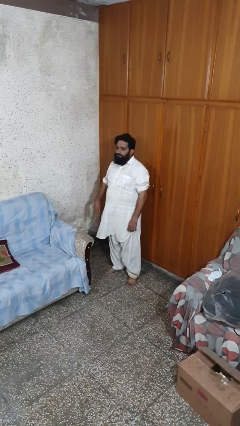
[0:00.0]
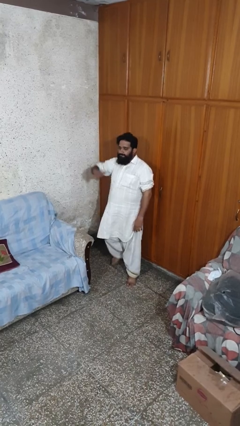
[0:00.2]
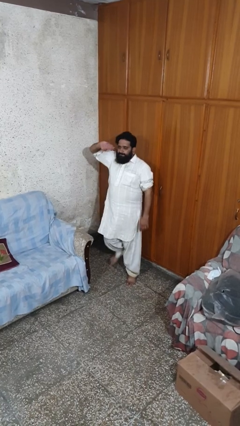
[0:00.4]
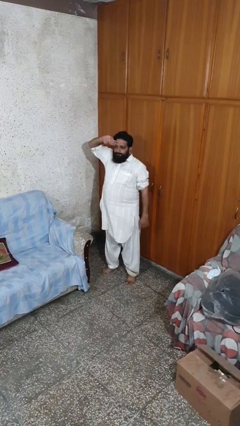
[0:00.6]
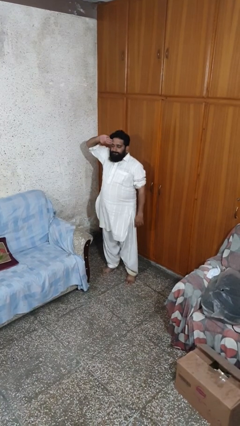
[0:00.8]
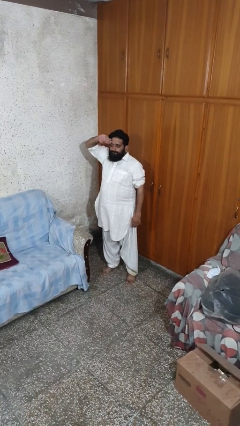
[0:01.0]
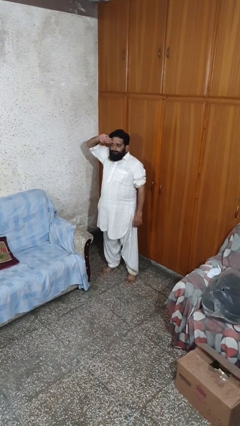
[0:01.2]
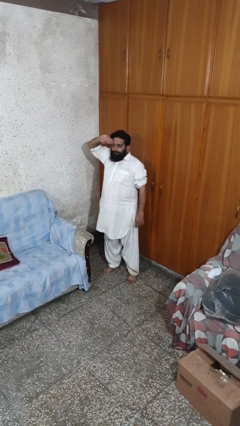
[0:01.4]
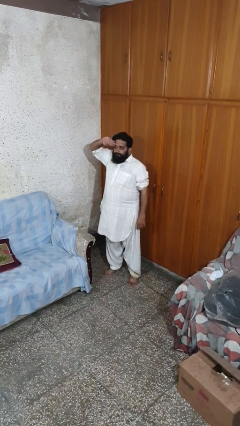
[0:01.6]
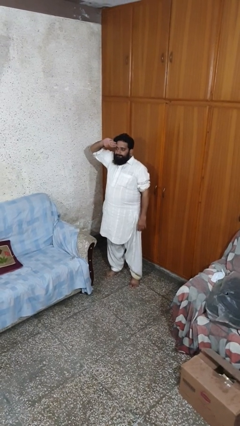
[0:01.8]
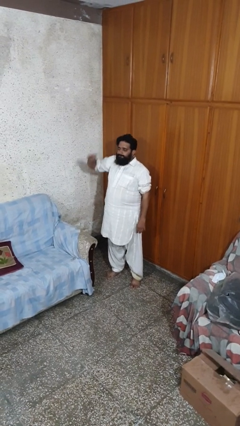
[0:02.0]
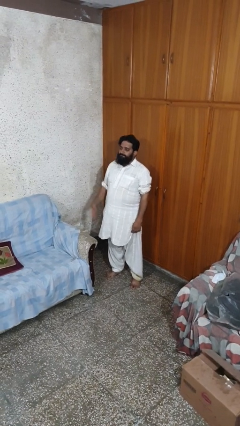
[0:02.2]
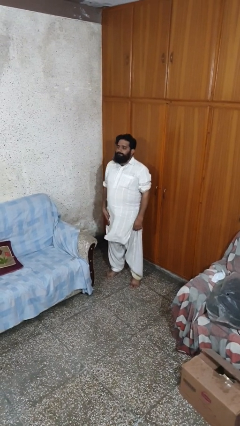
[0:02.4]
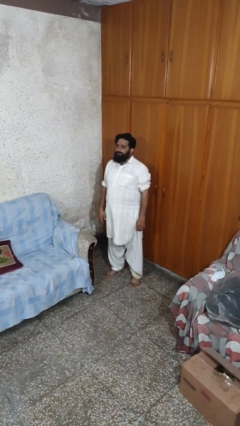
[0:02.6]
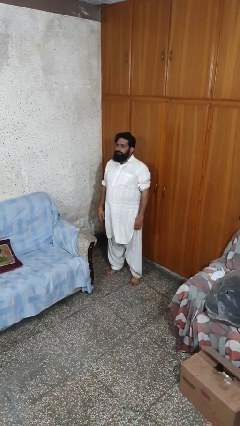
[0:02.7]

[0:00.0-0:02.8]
person salutes

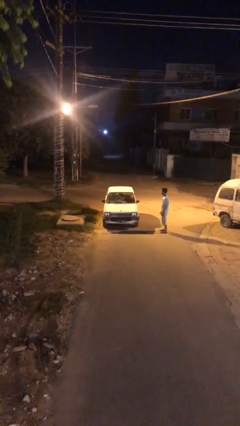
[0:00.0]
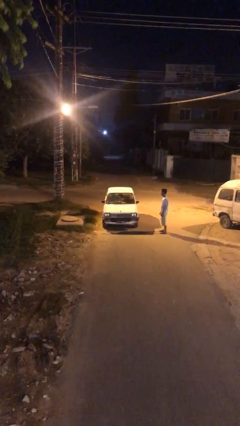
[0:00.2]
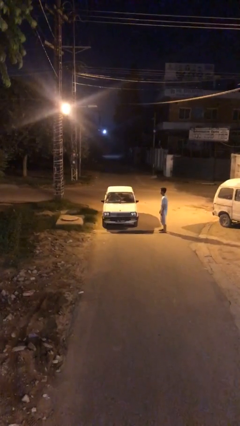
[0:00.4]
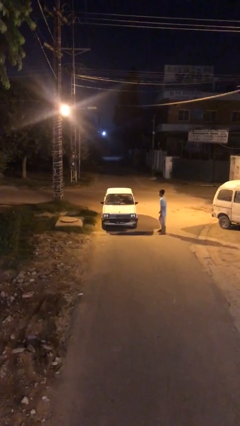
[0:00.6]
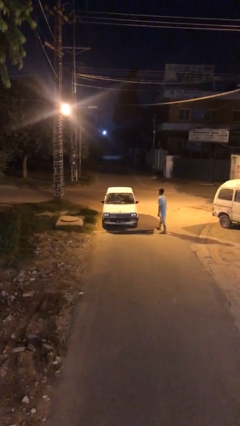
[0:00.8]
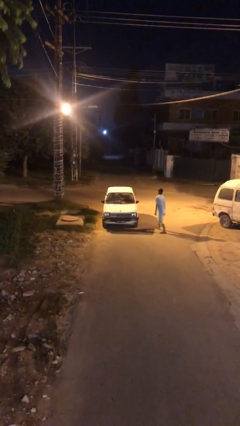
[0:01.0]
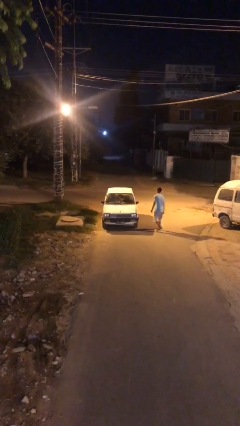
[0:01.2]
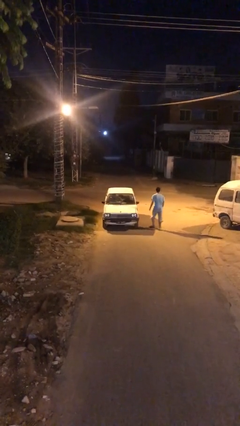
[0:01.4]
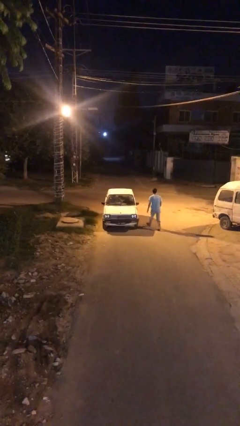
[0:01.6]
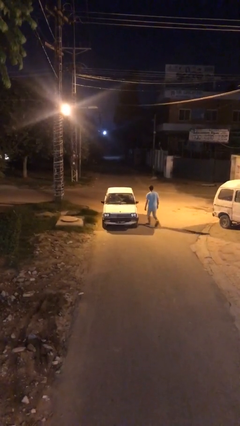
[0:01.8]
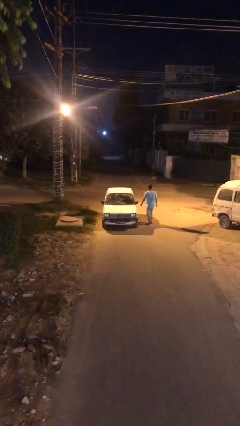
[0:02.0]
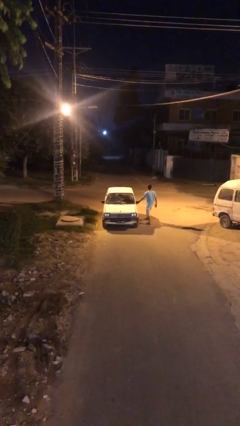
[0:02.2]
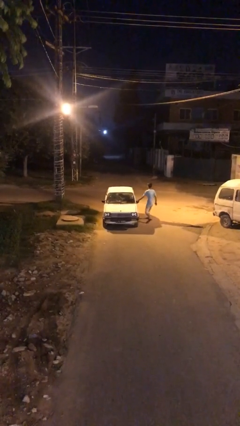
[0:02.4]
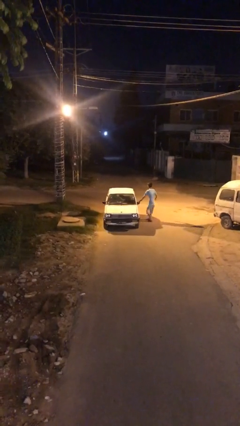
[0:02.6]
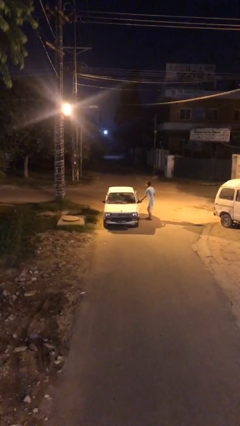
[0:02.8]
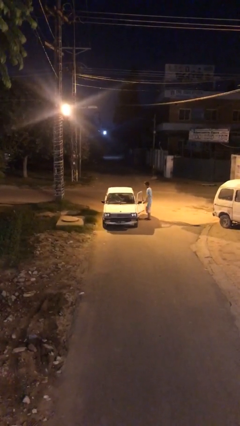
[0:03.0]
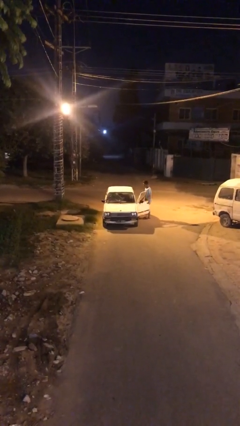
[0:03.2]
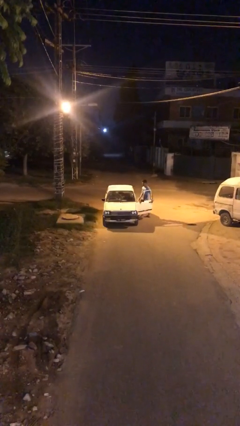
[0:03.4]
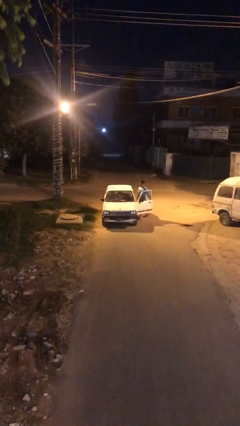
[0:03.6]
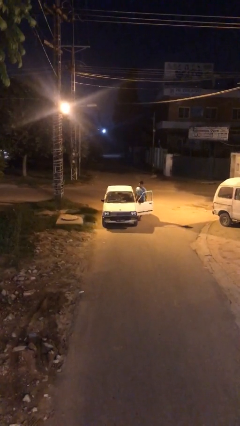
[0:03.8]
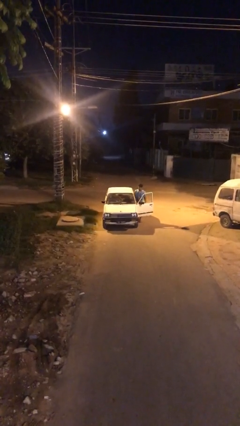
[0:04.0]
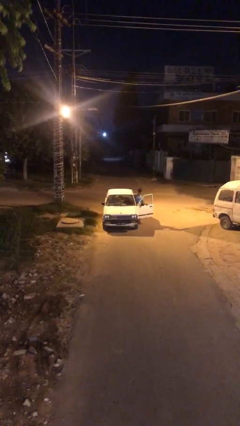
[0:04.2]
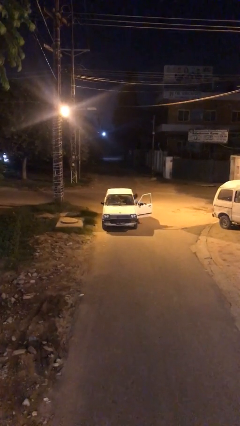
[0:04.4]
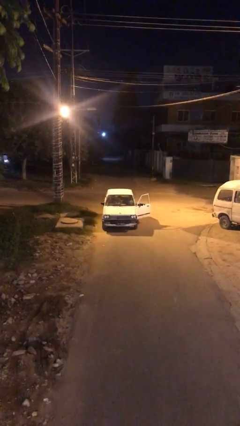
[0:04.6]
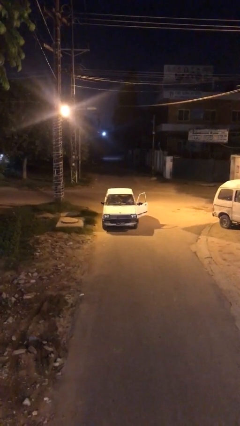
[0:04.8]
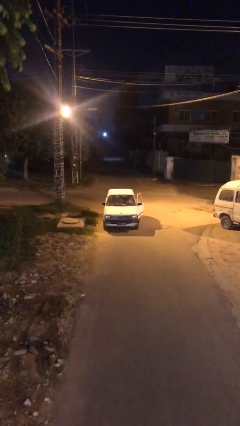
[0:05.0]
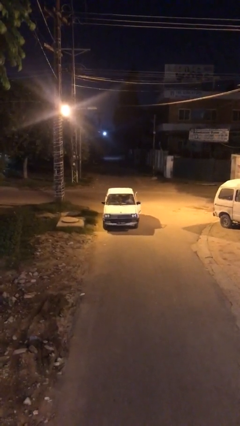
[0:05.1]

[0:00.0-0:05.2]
car picks up person

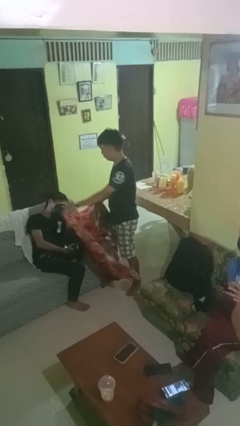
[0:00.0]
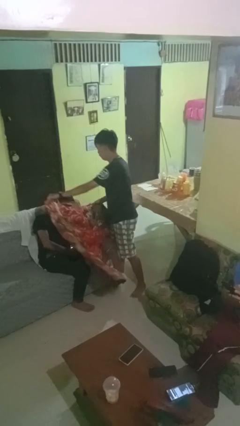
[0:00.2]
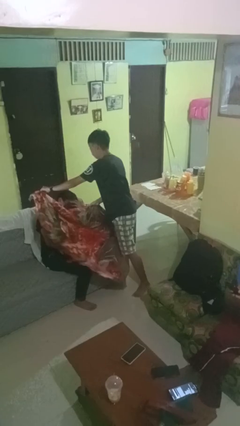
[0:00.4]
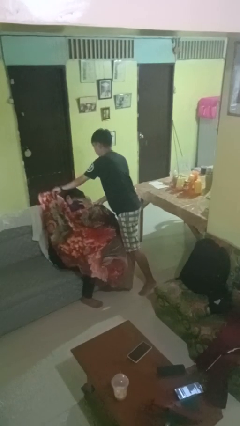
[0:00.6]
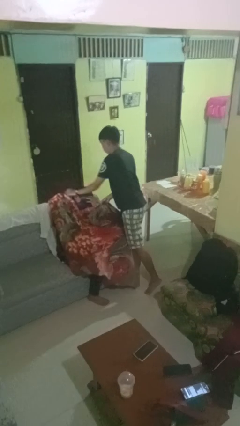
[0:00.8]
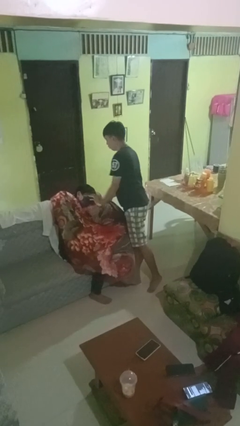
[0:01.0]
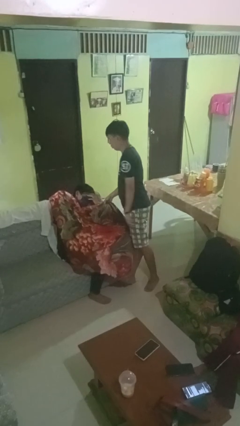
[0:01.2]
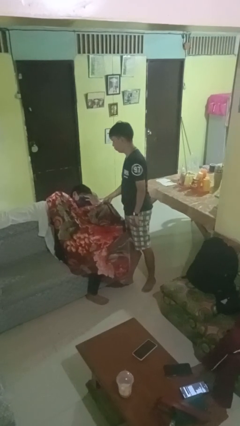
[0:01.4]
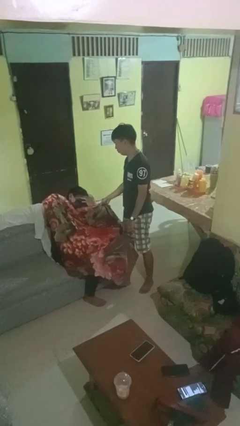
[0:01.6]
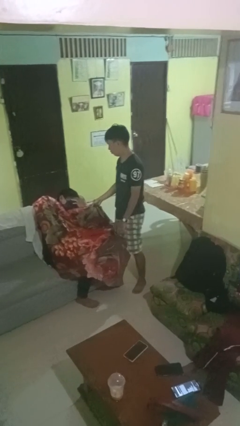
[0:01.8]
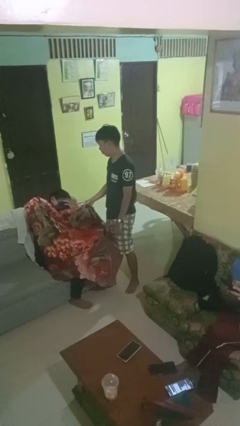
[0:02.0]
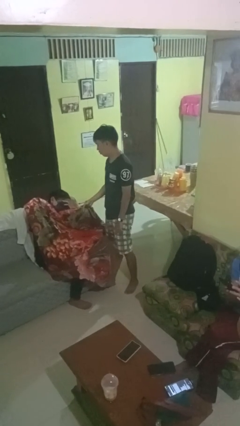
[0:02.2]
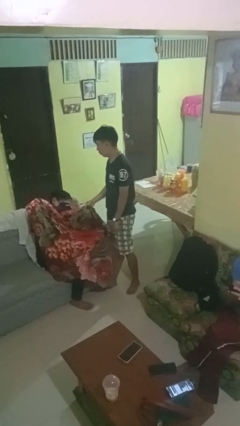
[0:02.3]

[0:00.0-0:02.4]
person covers friend with blanket

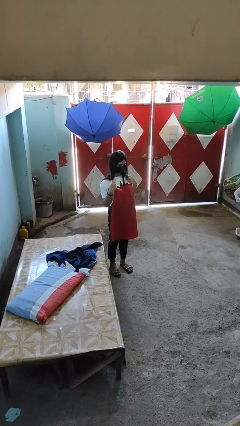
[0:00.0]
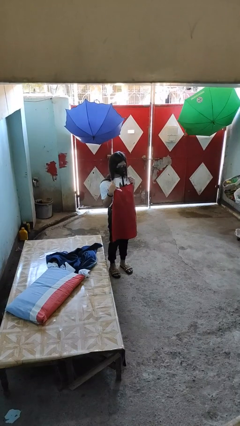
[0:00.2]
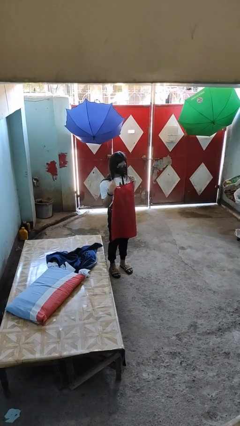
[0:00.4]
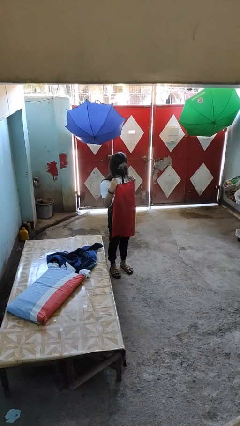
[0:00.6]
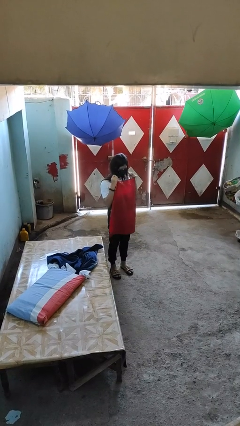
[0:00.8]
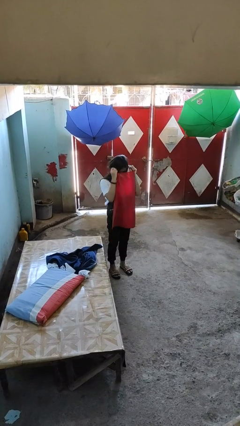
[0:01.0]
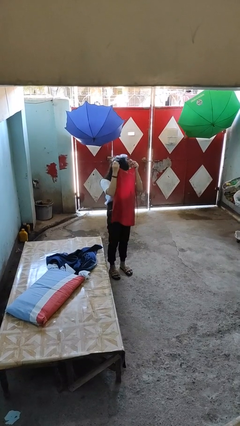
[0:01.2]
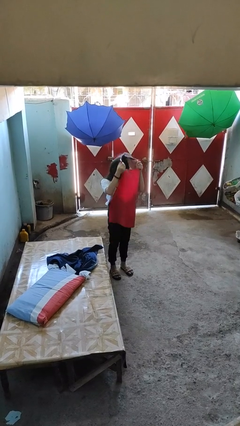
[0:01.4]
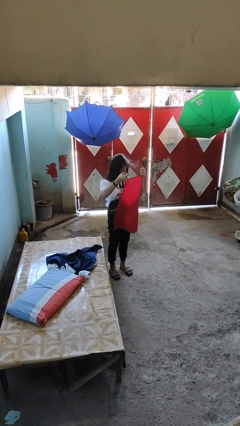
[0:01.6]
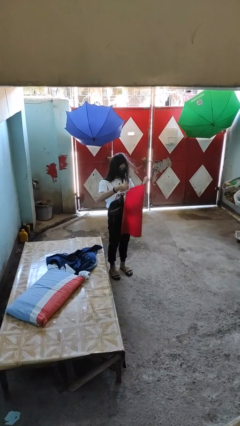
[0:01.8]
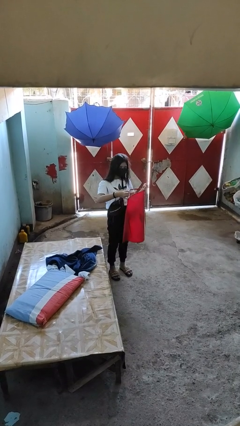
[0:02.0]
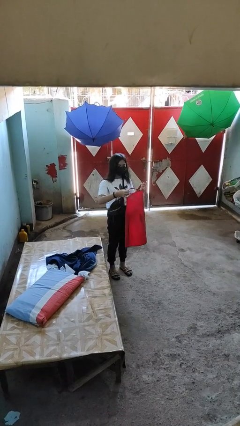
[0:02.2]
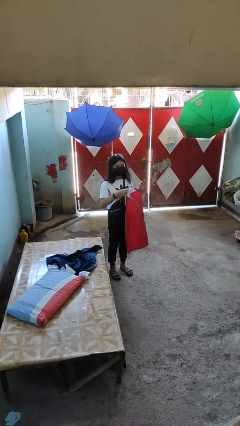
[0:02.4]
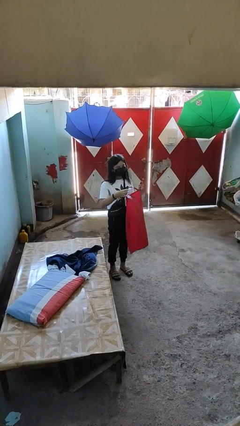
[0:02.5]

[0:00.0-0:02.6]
person takes off apron

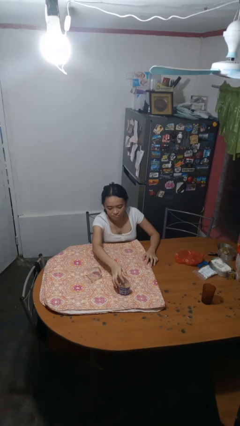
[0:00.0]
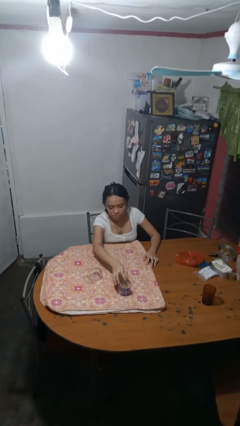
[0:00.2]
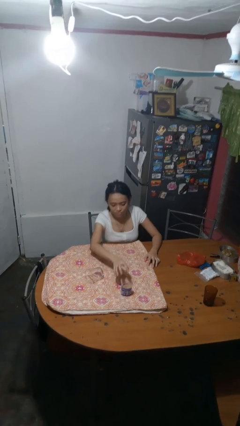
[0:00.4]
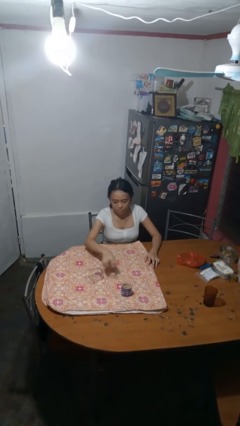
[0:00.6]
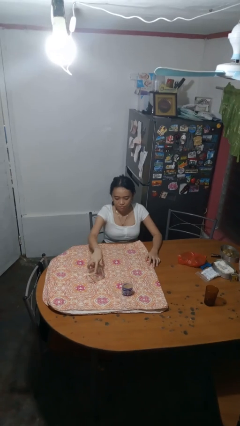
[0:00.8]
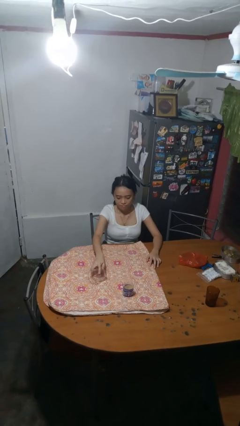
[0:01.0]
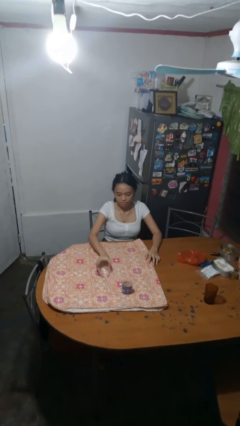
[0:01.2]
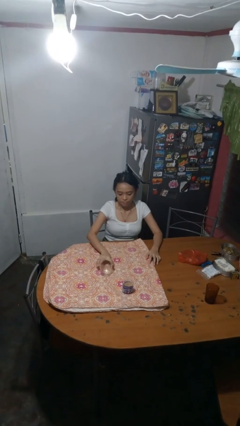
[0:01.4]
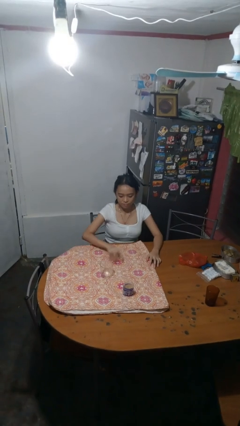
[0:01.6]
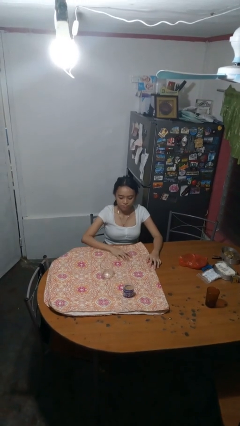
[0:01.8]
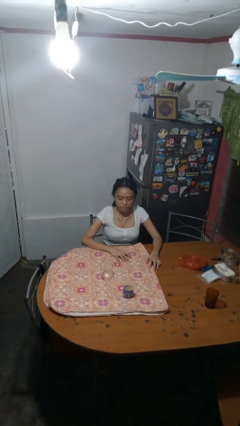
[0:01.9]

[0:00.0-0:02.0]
person sets upright glass

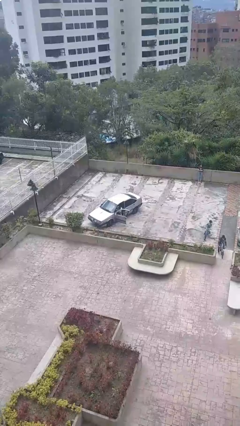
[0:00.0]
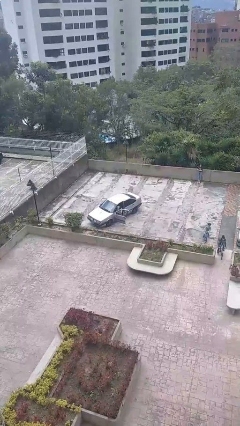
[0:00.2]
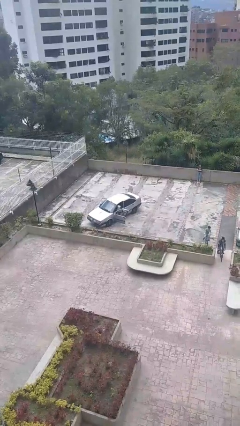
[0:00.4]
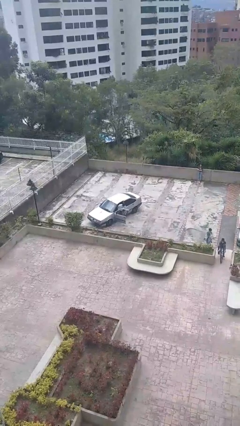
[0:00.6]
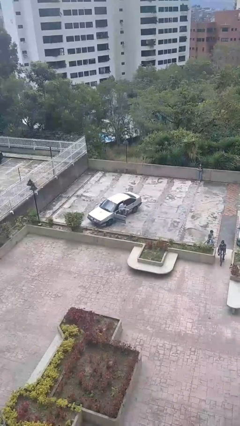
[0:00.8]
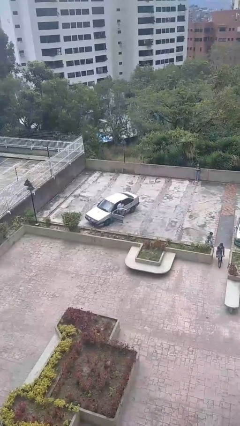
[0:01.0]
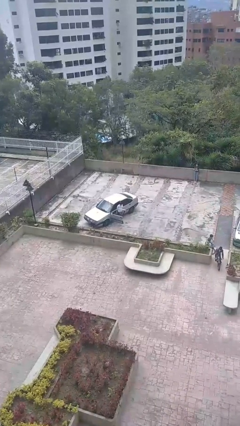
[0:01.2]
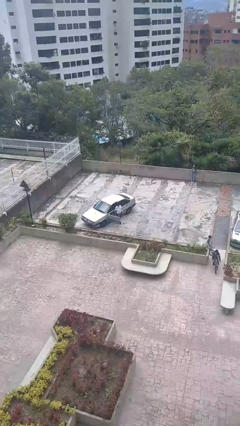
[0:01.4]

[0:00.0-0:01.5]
person exits car

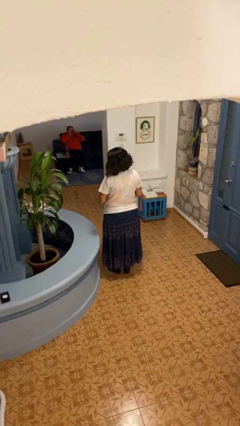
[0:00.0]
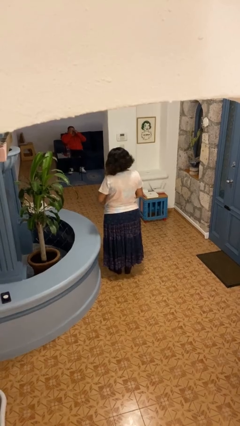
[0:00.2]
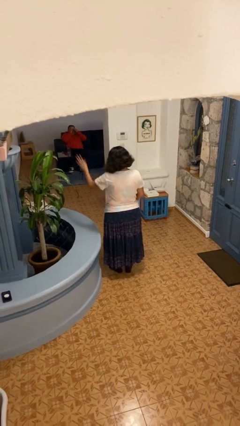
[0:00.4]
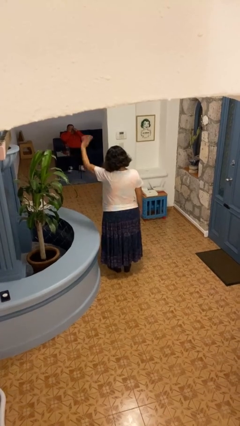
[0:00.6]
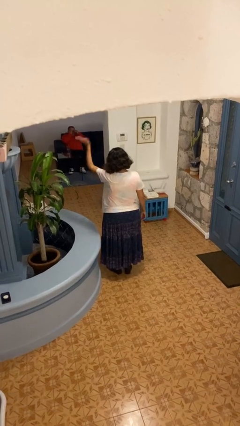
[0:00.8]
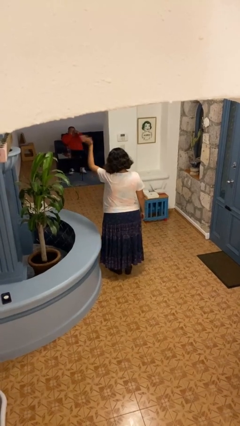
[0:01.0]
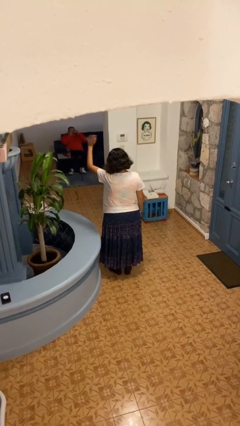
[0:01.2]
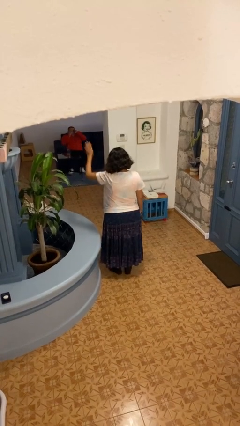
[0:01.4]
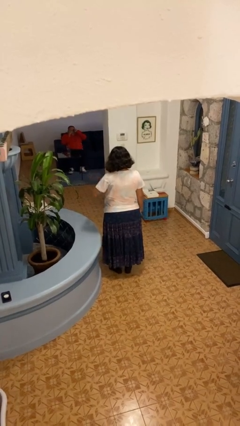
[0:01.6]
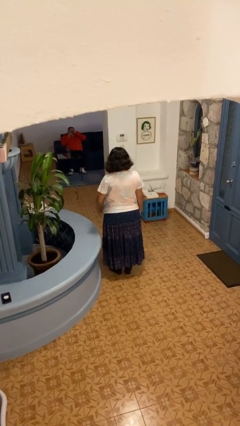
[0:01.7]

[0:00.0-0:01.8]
person waves at person
